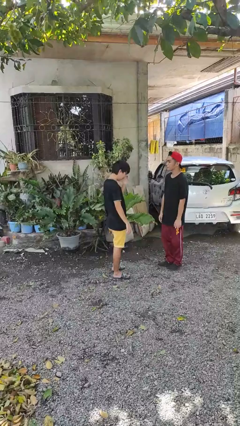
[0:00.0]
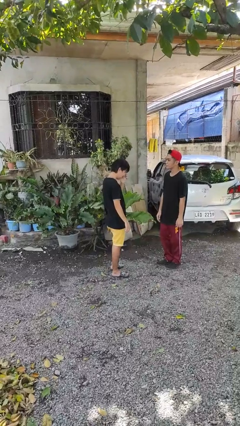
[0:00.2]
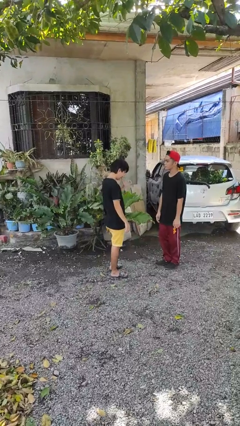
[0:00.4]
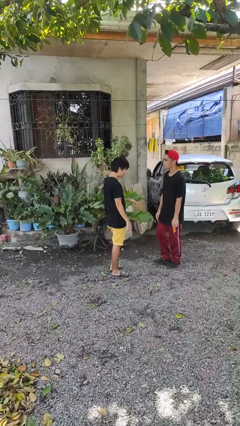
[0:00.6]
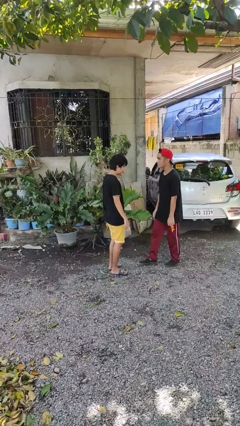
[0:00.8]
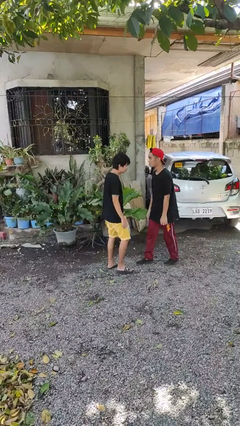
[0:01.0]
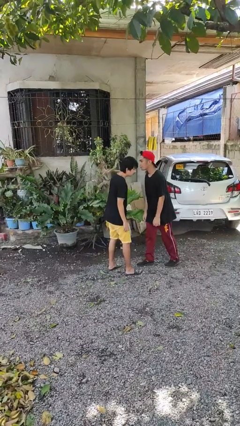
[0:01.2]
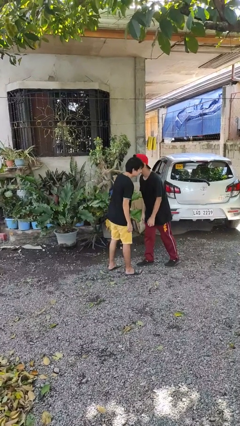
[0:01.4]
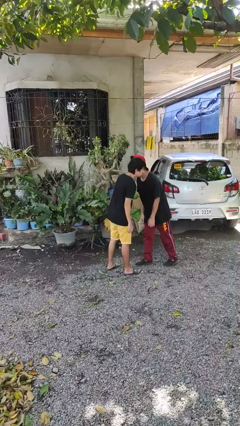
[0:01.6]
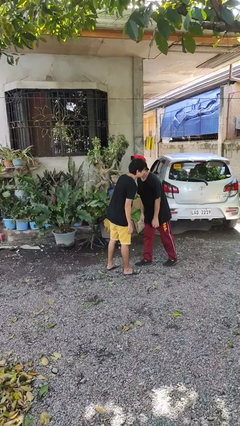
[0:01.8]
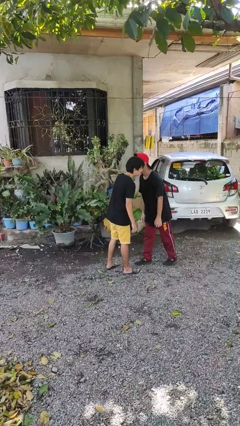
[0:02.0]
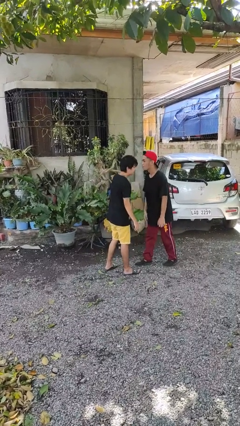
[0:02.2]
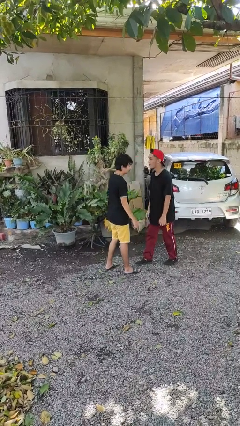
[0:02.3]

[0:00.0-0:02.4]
person kisses cheek of person

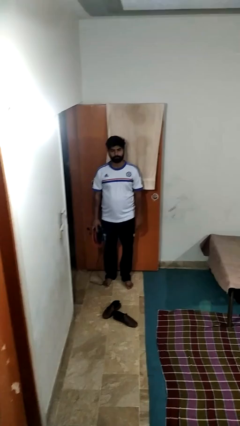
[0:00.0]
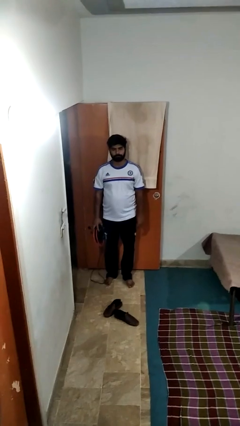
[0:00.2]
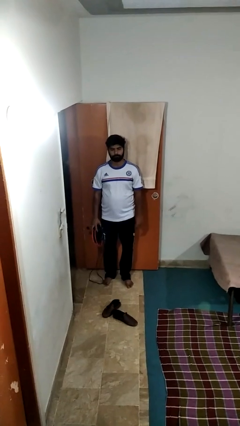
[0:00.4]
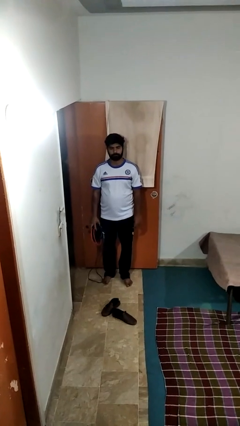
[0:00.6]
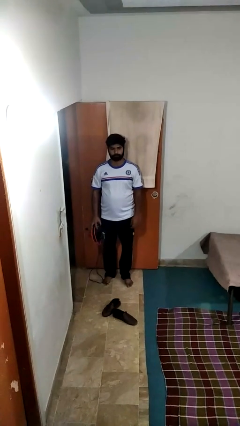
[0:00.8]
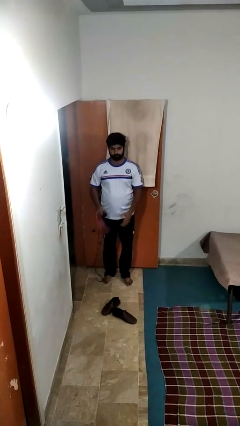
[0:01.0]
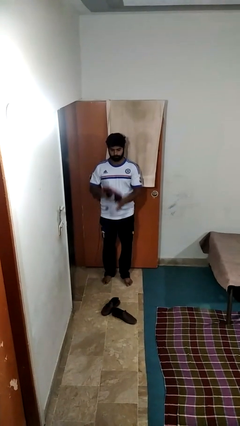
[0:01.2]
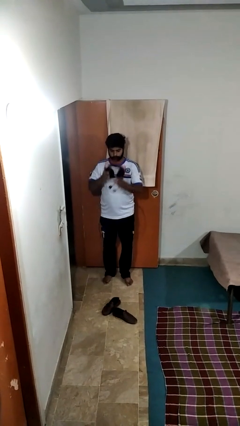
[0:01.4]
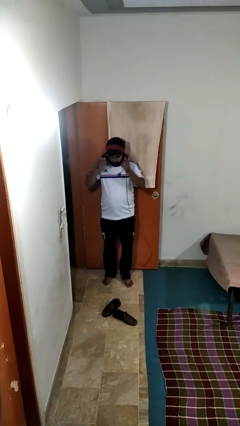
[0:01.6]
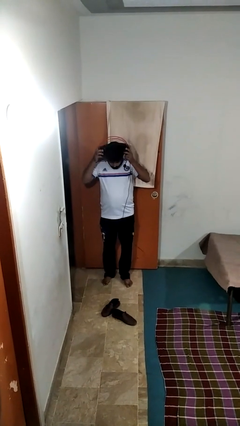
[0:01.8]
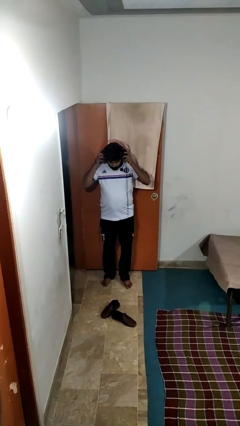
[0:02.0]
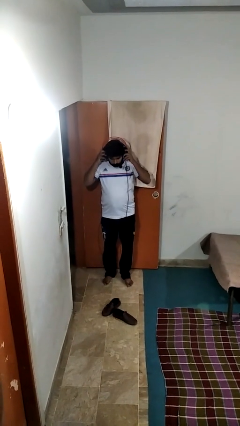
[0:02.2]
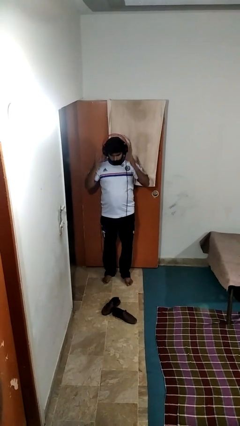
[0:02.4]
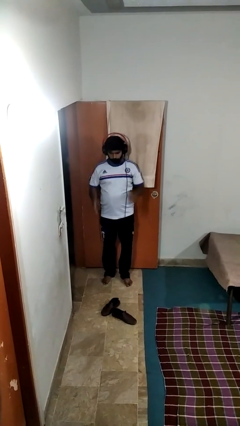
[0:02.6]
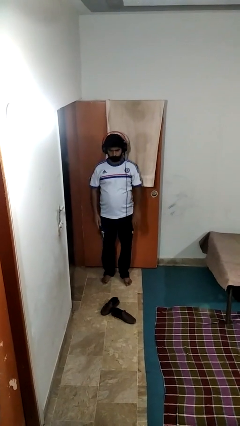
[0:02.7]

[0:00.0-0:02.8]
person puts on headphones

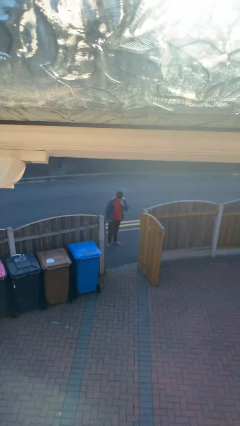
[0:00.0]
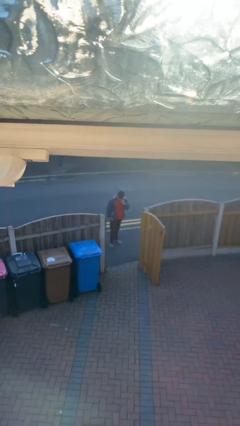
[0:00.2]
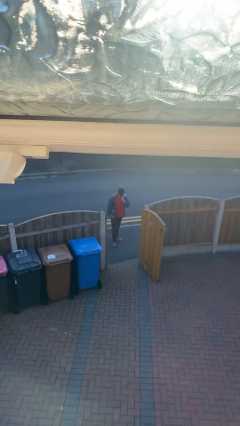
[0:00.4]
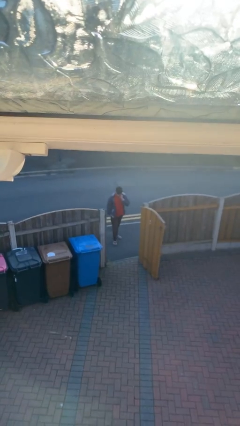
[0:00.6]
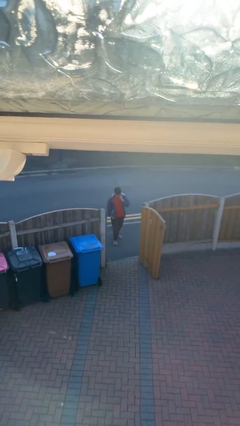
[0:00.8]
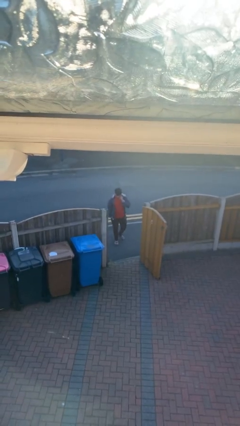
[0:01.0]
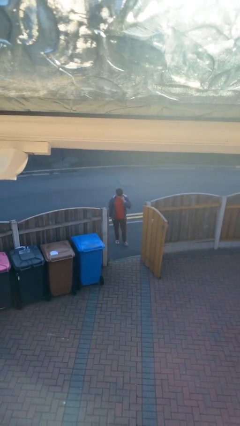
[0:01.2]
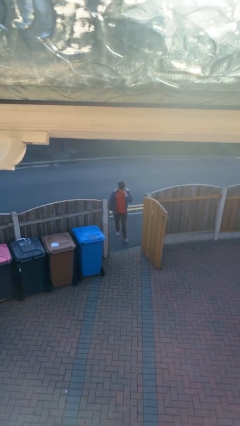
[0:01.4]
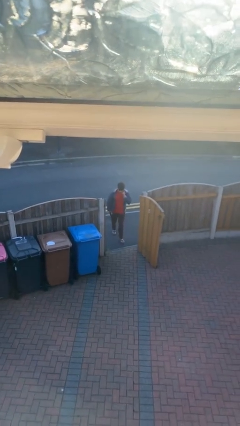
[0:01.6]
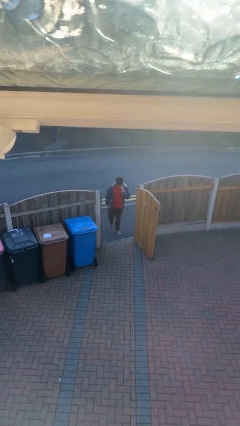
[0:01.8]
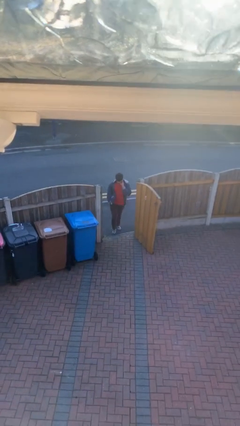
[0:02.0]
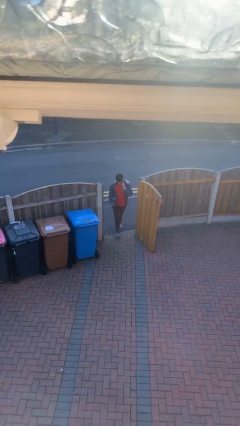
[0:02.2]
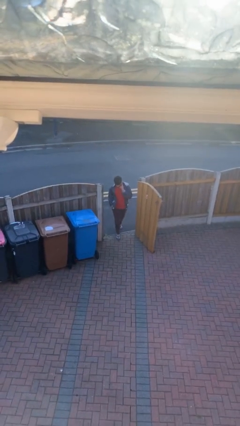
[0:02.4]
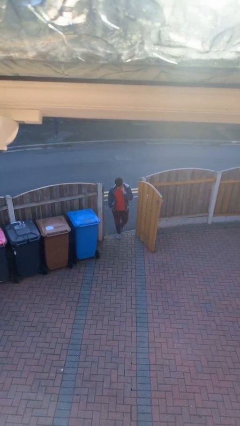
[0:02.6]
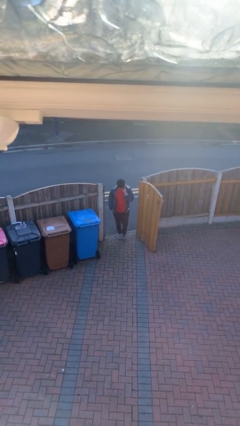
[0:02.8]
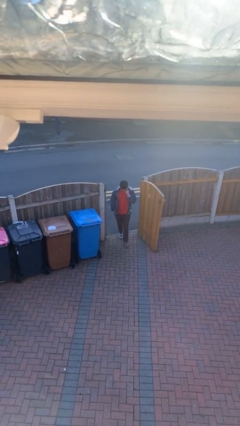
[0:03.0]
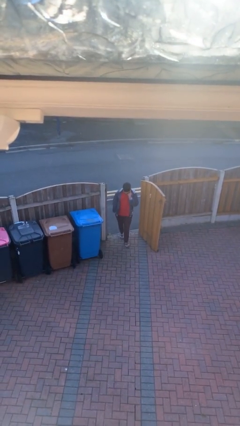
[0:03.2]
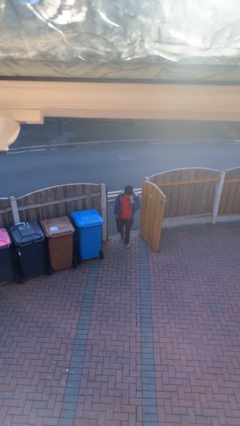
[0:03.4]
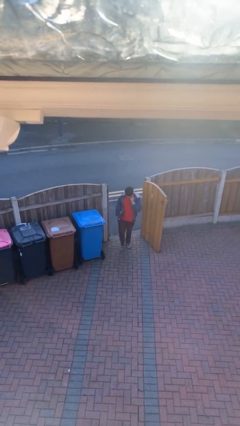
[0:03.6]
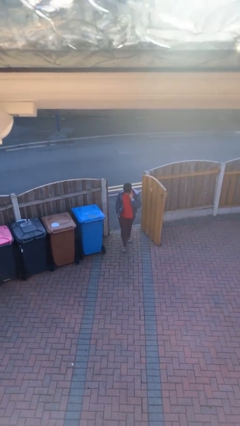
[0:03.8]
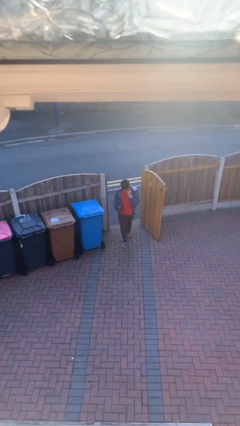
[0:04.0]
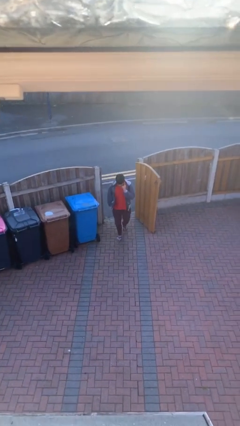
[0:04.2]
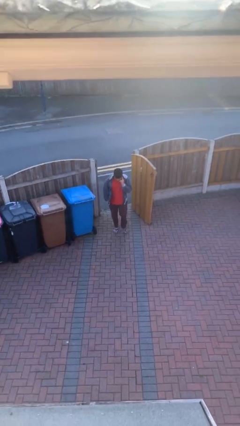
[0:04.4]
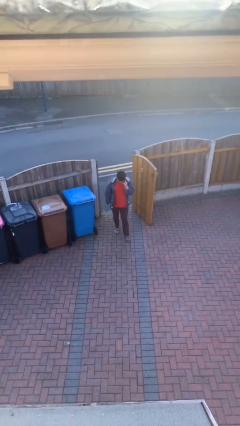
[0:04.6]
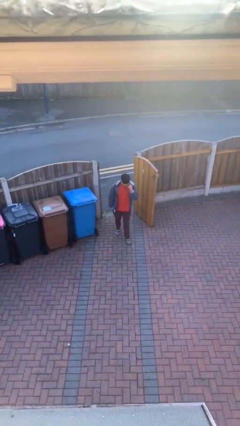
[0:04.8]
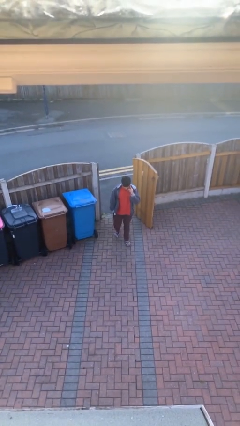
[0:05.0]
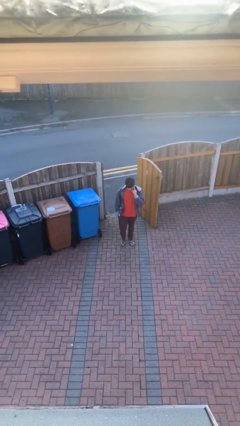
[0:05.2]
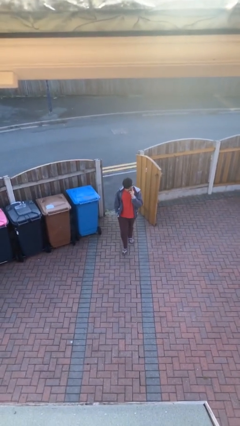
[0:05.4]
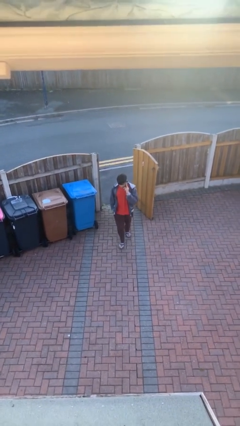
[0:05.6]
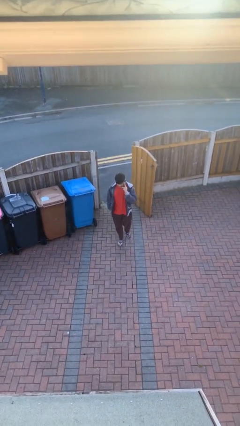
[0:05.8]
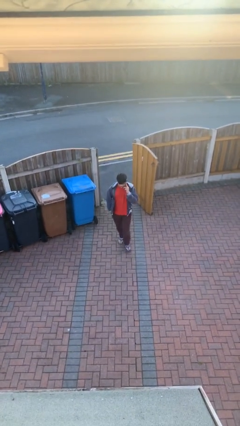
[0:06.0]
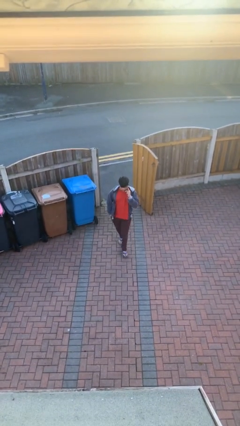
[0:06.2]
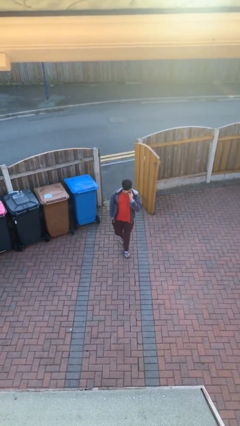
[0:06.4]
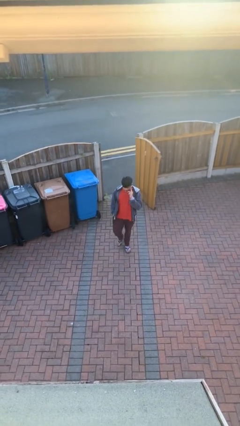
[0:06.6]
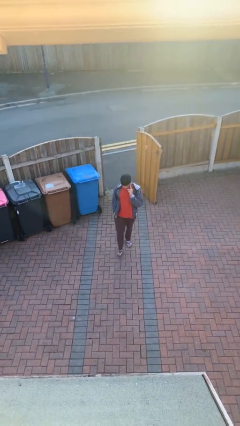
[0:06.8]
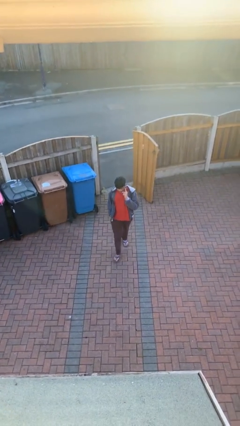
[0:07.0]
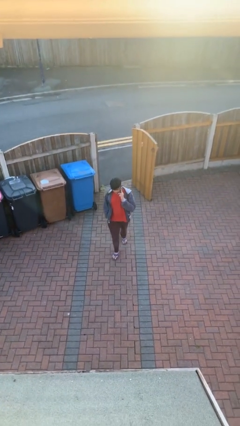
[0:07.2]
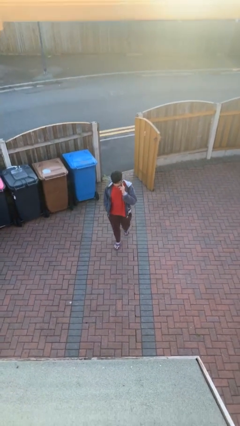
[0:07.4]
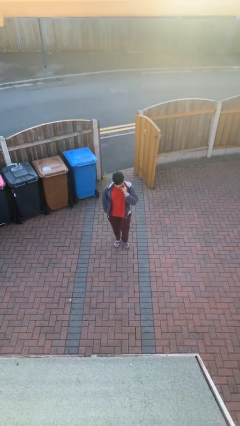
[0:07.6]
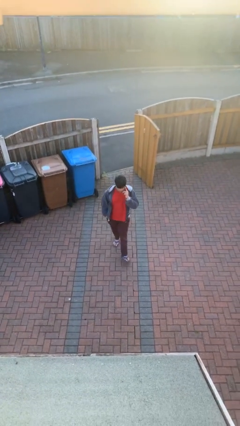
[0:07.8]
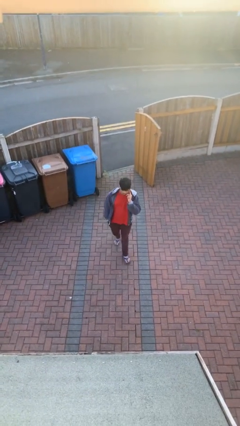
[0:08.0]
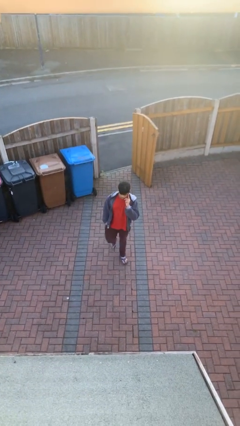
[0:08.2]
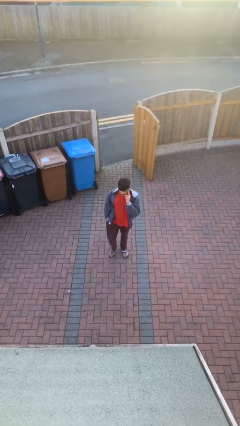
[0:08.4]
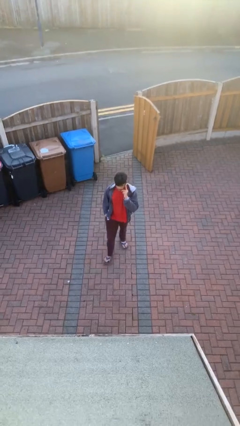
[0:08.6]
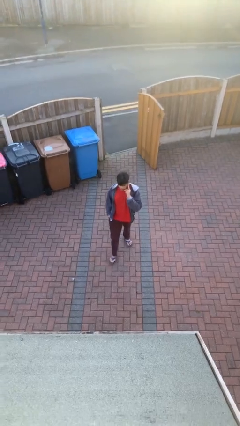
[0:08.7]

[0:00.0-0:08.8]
person enters scene through structure

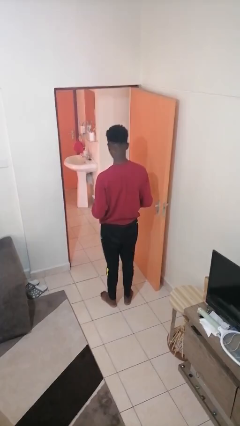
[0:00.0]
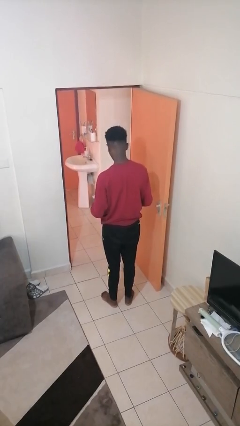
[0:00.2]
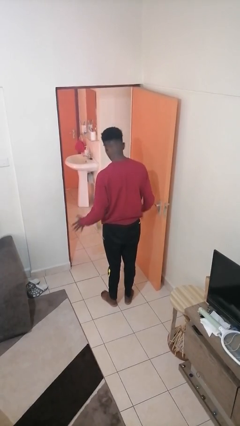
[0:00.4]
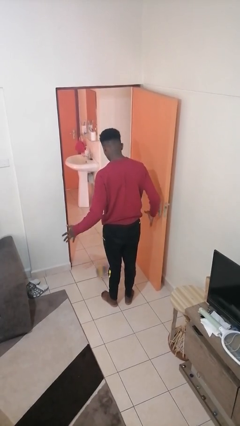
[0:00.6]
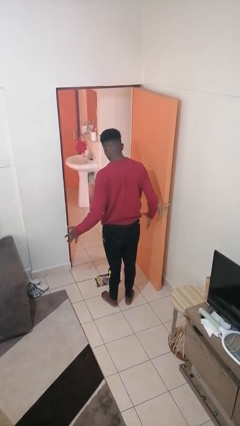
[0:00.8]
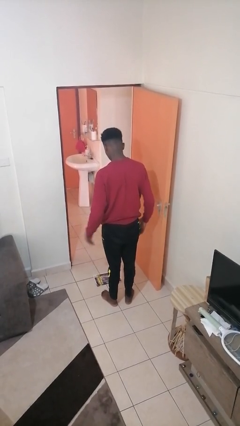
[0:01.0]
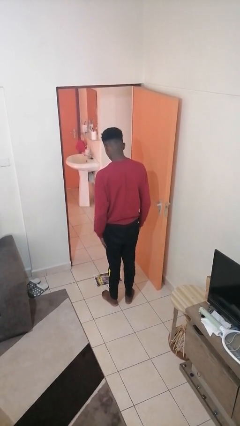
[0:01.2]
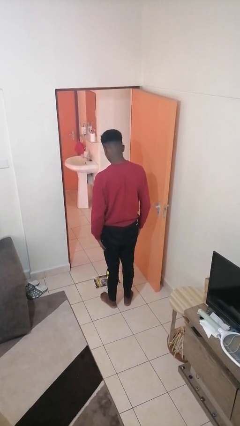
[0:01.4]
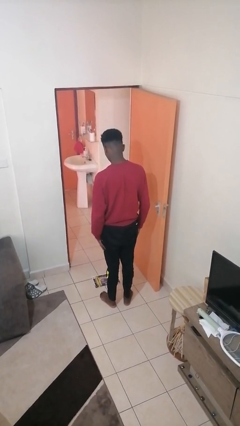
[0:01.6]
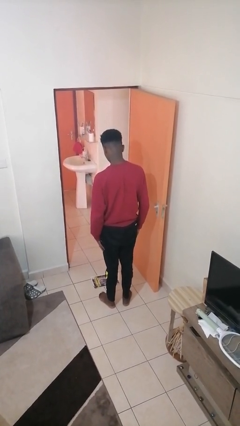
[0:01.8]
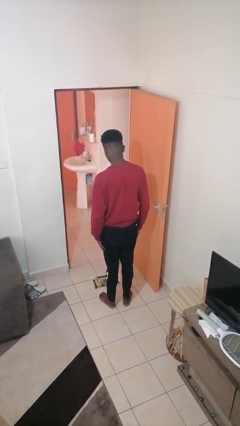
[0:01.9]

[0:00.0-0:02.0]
person drops object

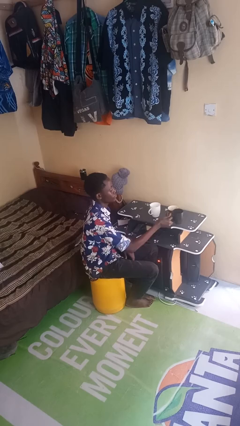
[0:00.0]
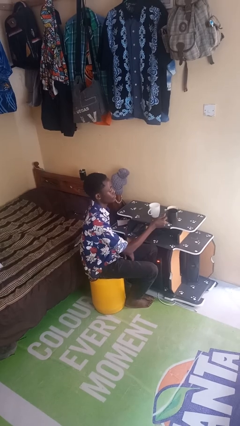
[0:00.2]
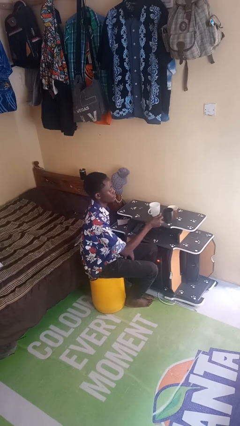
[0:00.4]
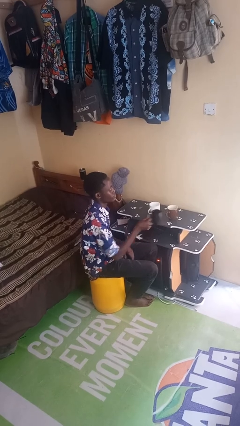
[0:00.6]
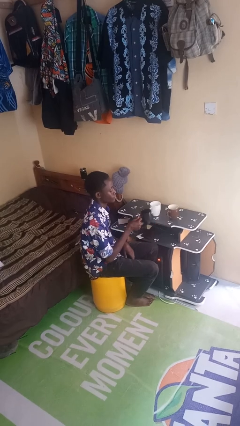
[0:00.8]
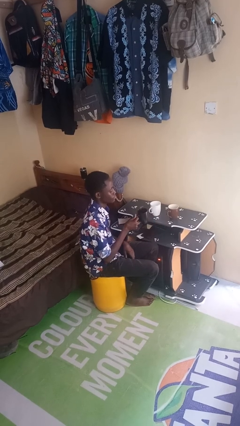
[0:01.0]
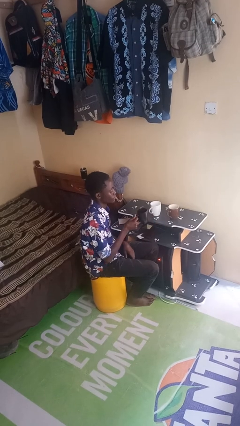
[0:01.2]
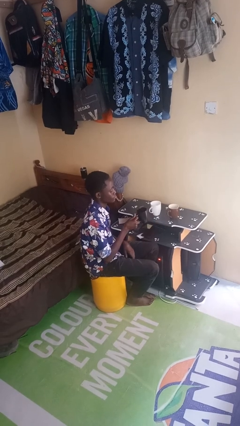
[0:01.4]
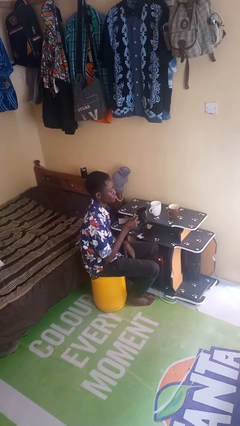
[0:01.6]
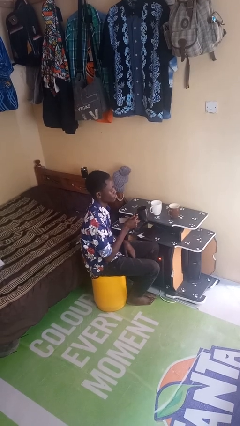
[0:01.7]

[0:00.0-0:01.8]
person picks up object from table
